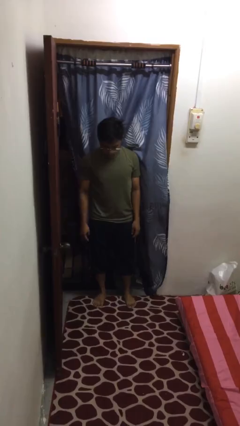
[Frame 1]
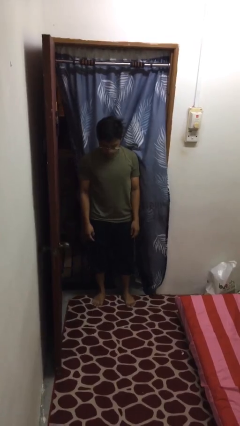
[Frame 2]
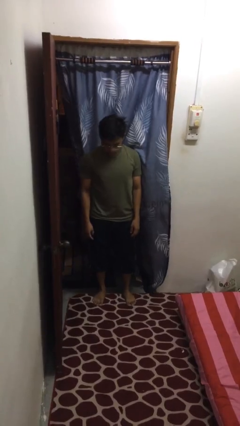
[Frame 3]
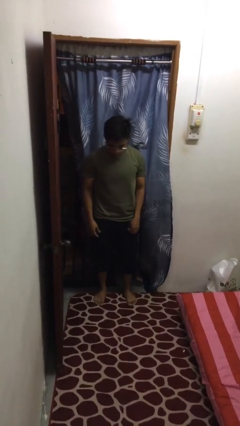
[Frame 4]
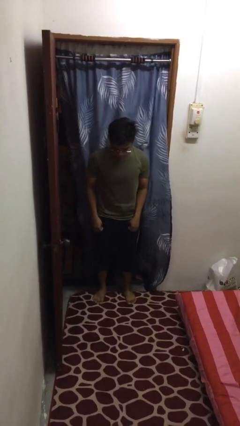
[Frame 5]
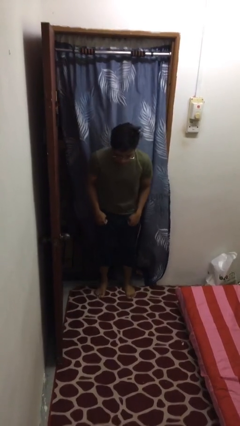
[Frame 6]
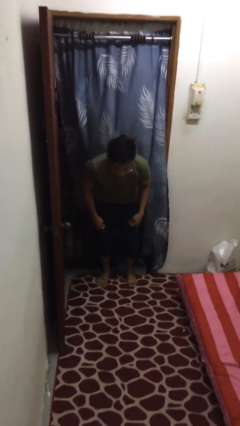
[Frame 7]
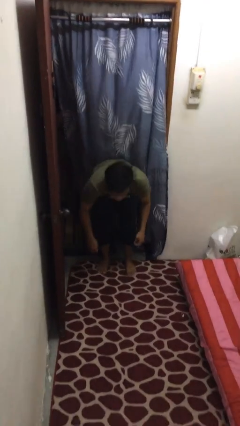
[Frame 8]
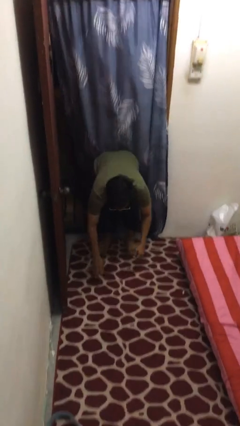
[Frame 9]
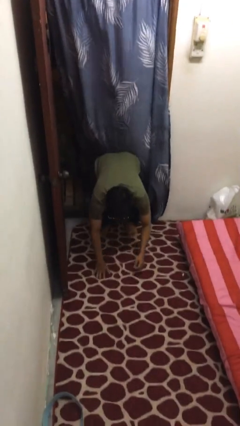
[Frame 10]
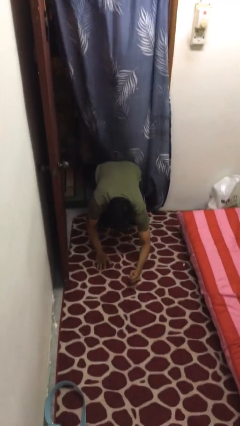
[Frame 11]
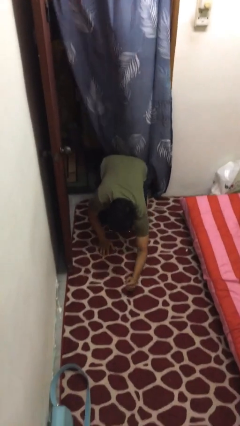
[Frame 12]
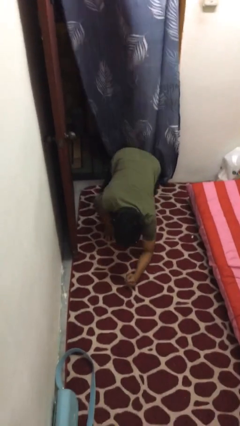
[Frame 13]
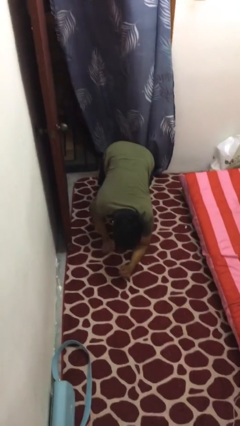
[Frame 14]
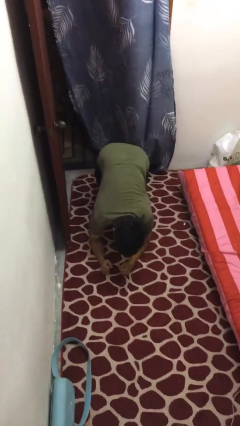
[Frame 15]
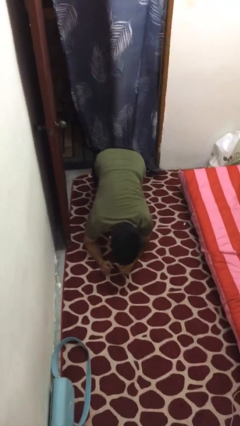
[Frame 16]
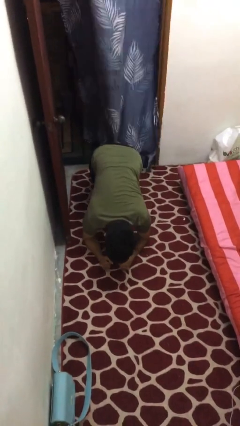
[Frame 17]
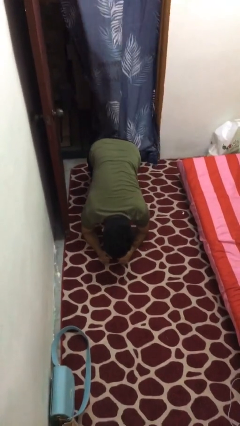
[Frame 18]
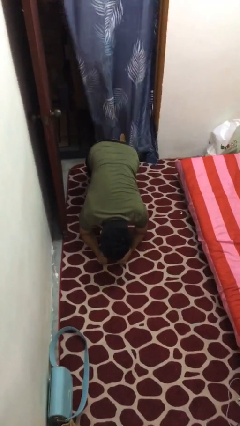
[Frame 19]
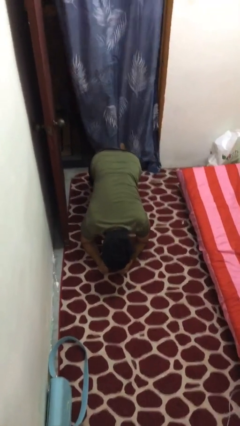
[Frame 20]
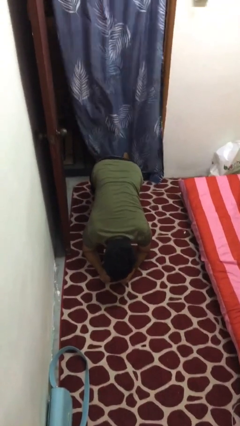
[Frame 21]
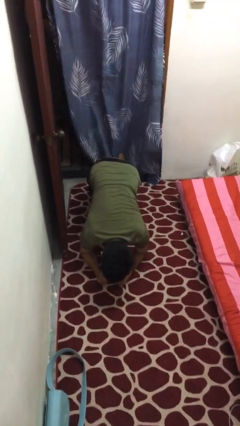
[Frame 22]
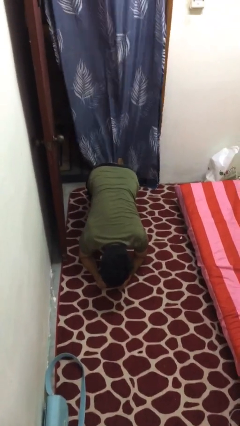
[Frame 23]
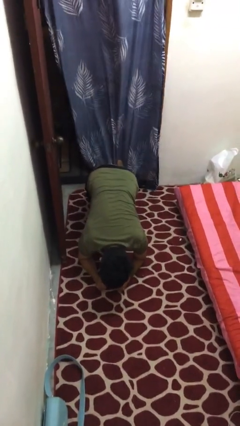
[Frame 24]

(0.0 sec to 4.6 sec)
person exercises with plank

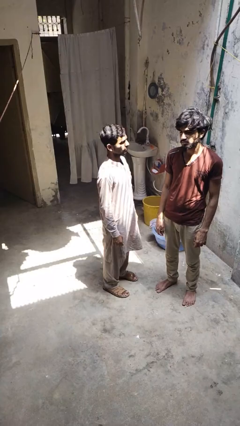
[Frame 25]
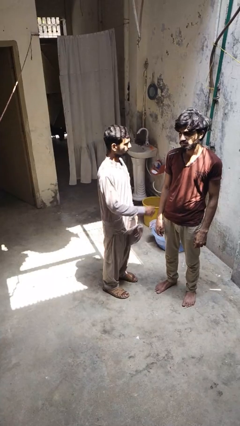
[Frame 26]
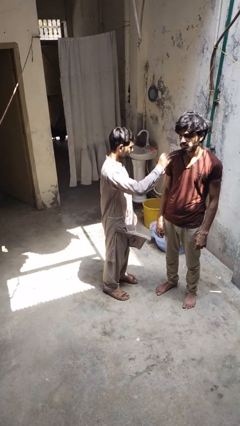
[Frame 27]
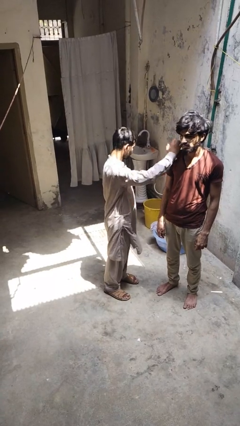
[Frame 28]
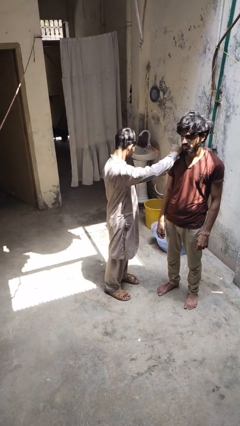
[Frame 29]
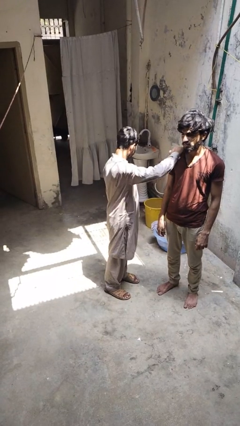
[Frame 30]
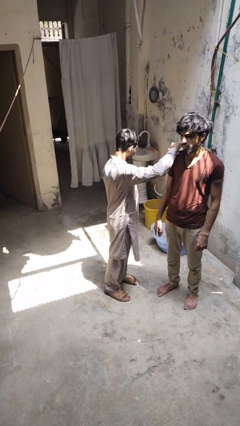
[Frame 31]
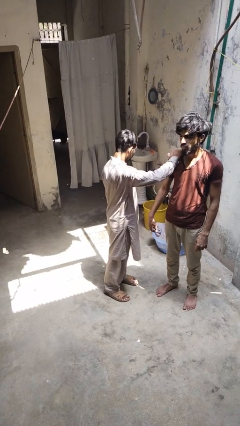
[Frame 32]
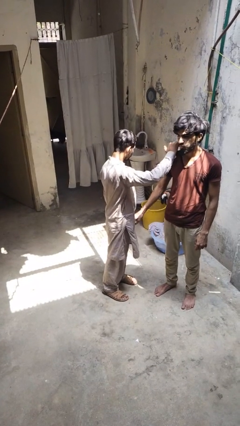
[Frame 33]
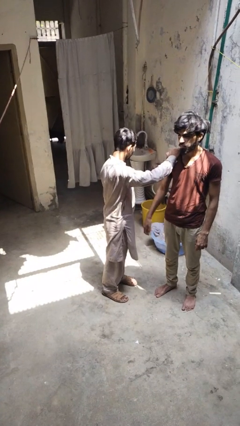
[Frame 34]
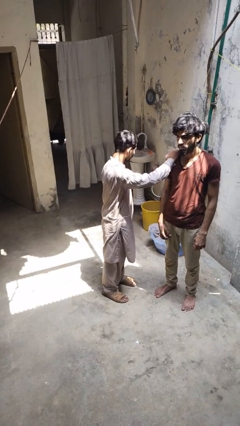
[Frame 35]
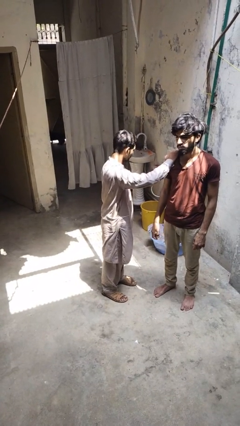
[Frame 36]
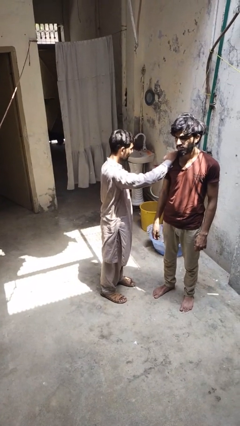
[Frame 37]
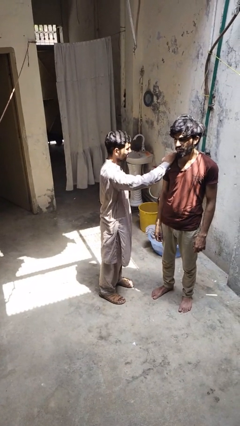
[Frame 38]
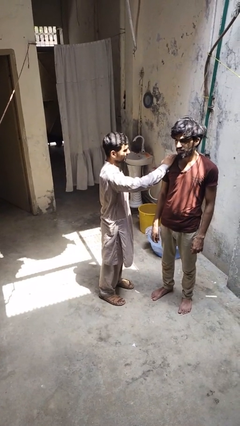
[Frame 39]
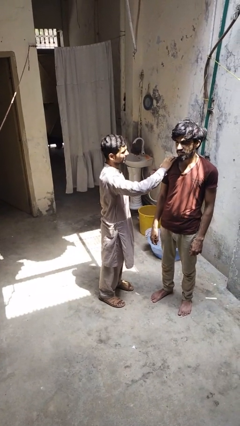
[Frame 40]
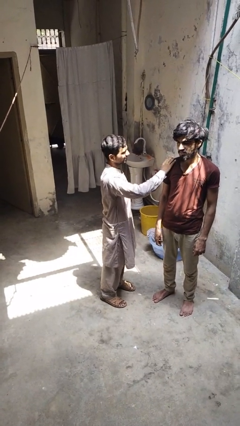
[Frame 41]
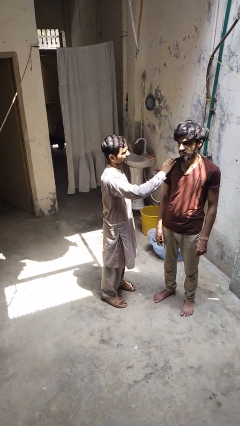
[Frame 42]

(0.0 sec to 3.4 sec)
person pounds shoulders of person

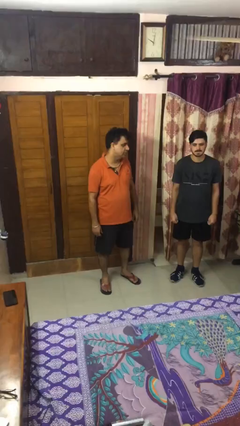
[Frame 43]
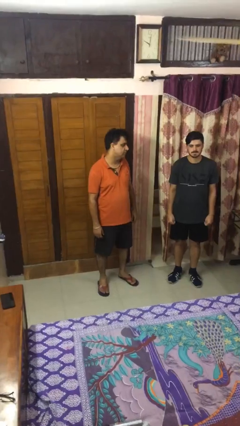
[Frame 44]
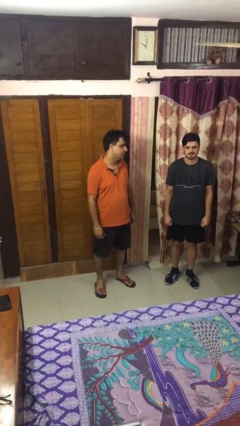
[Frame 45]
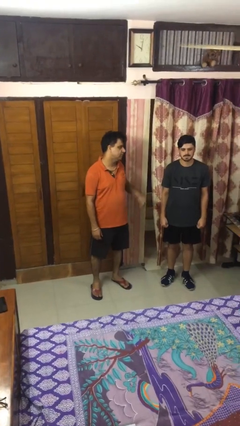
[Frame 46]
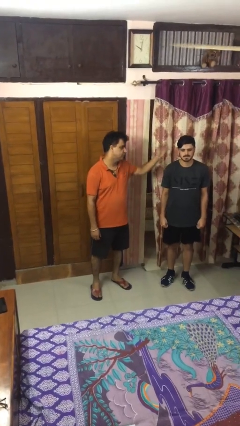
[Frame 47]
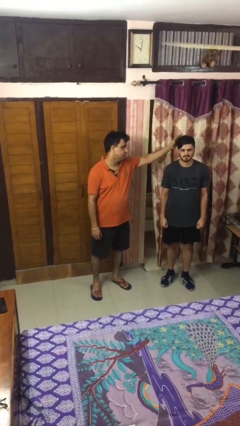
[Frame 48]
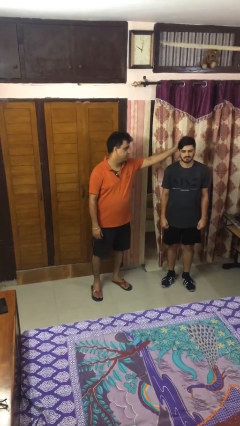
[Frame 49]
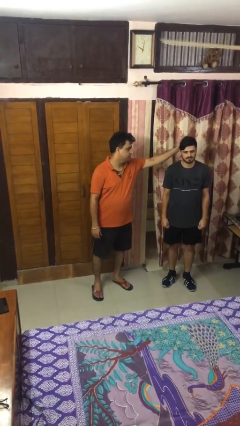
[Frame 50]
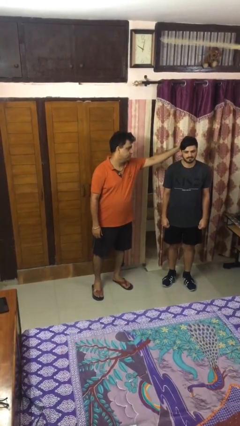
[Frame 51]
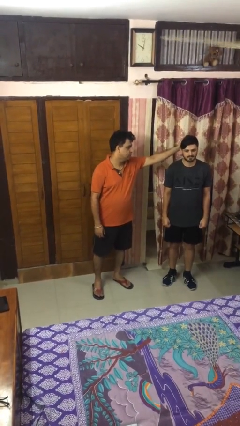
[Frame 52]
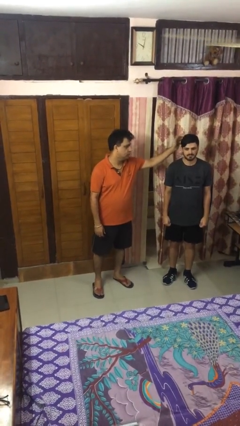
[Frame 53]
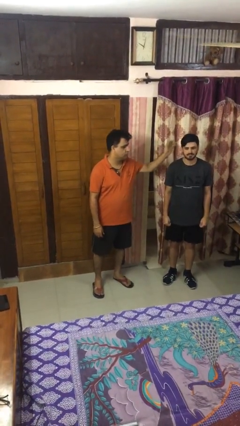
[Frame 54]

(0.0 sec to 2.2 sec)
person grabs person by hair

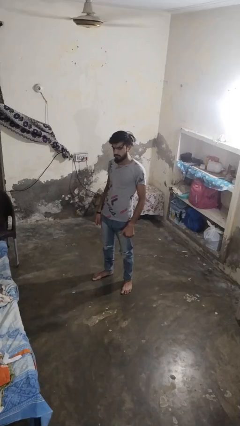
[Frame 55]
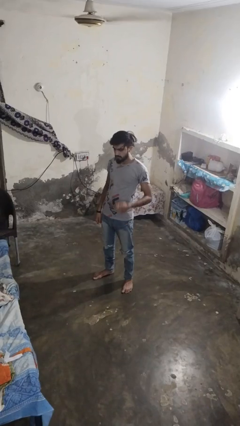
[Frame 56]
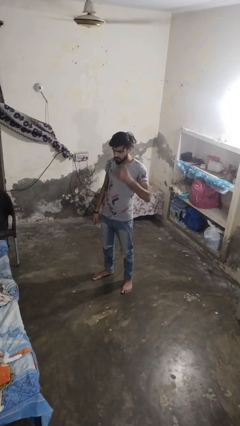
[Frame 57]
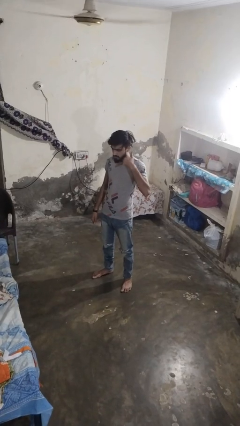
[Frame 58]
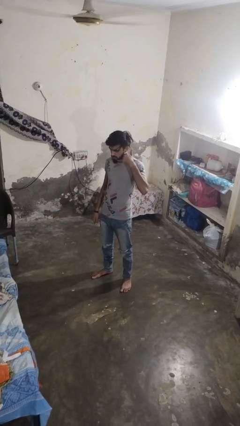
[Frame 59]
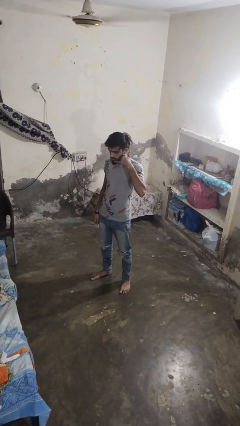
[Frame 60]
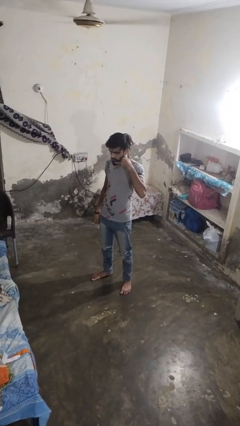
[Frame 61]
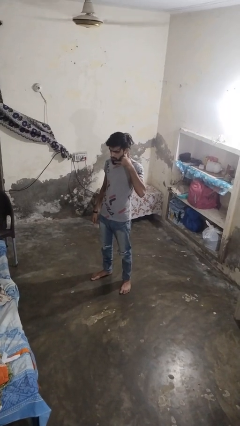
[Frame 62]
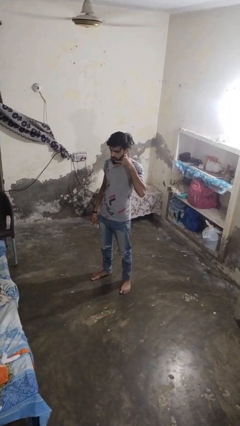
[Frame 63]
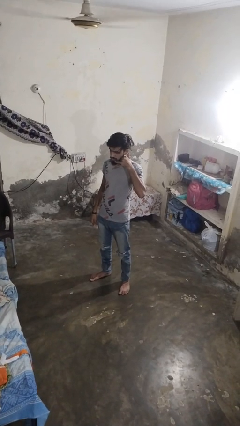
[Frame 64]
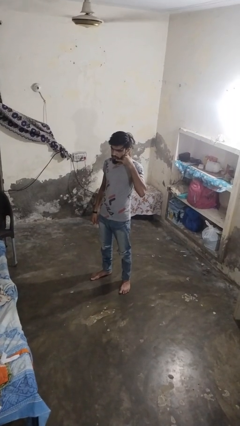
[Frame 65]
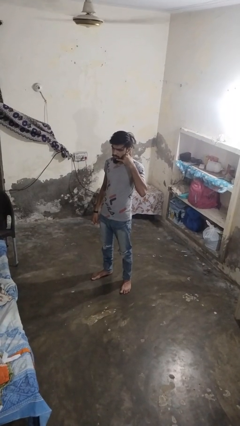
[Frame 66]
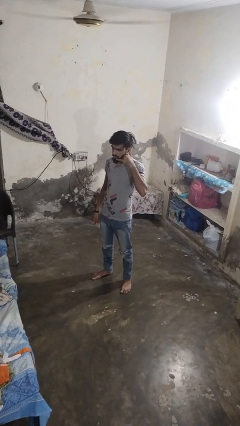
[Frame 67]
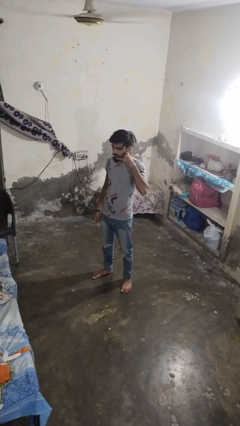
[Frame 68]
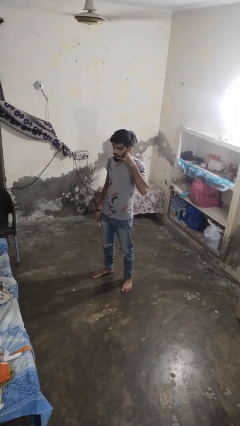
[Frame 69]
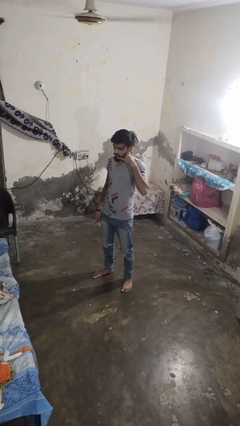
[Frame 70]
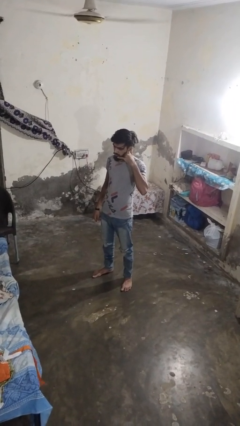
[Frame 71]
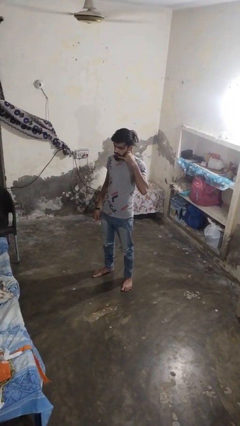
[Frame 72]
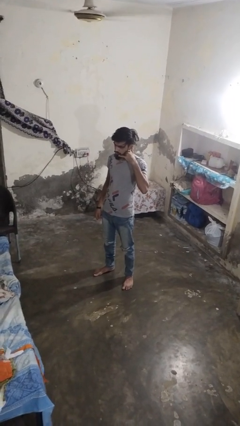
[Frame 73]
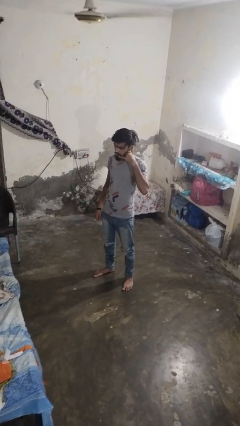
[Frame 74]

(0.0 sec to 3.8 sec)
person gestures call me

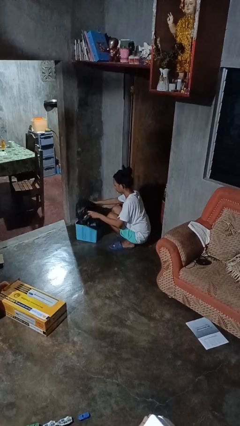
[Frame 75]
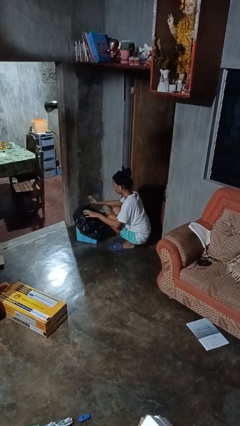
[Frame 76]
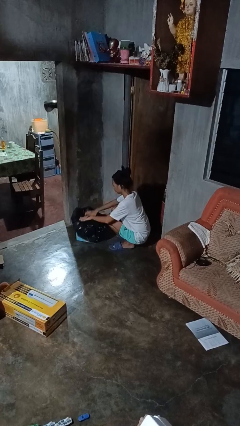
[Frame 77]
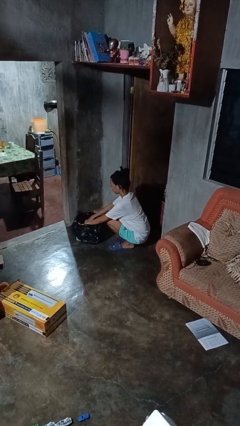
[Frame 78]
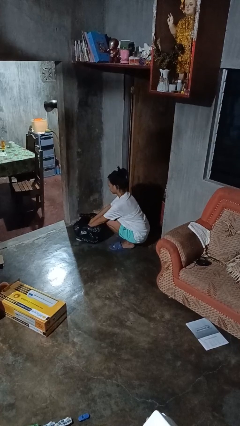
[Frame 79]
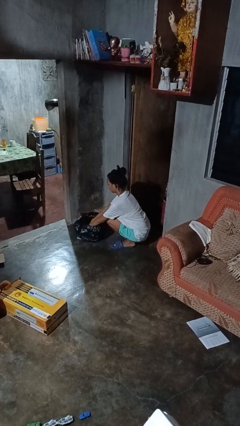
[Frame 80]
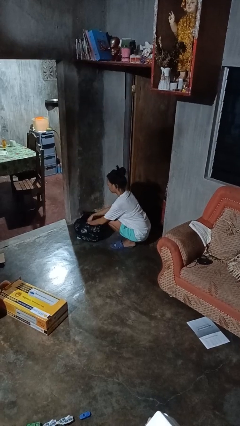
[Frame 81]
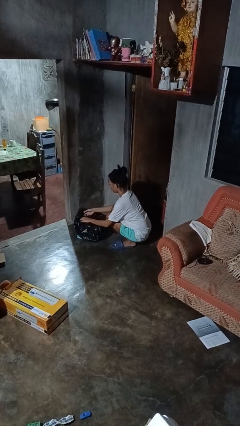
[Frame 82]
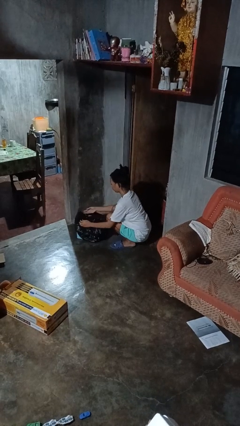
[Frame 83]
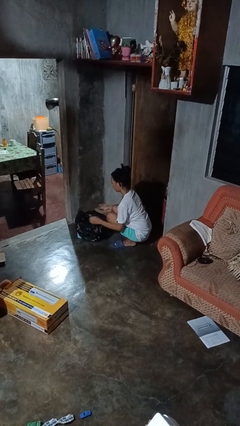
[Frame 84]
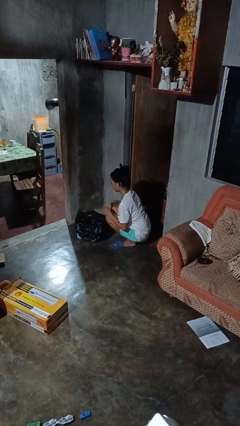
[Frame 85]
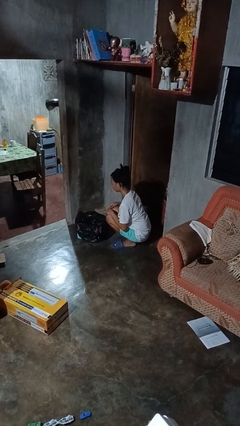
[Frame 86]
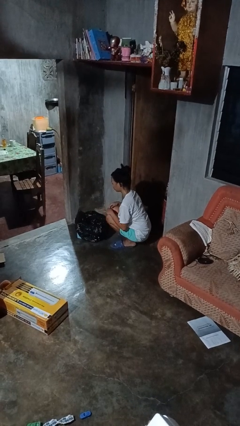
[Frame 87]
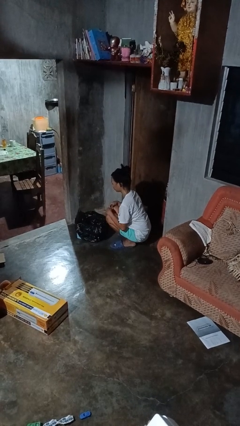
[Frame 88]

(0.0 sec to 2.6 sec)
person inserts trashbag into trashcan

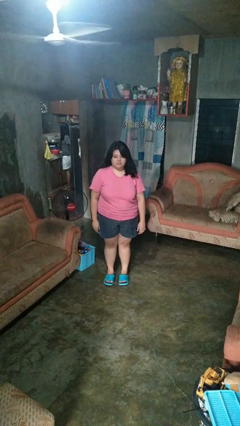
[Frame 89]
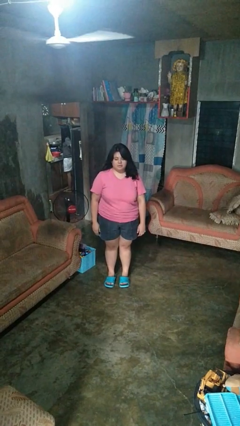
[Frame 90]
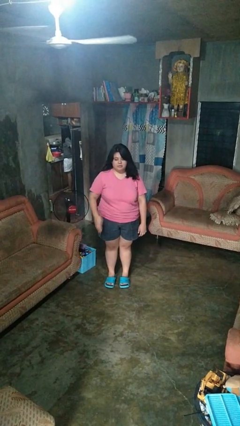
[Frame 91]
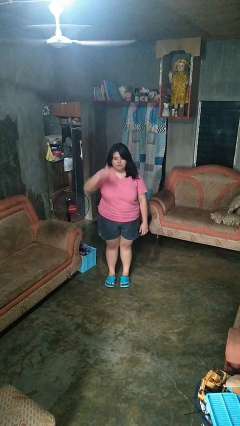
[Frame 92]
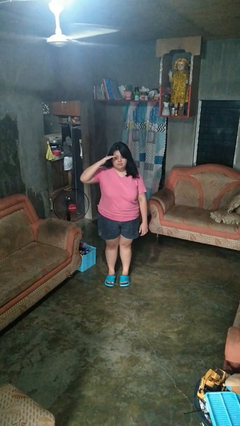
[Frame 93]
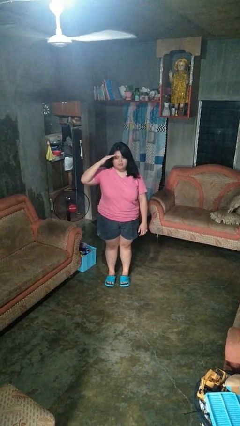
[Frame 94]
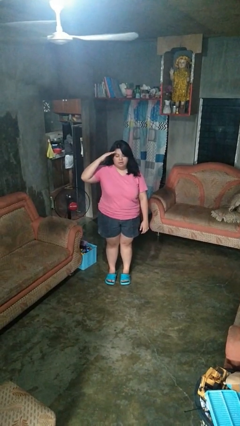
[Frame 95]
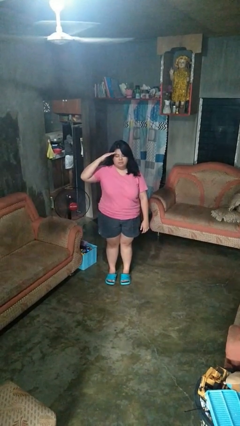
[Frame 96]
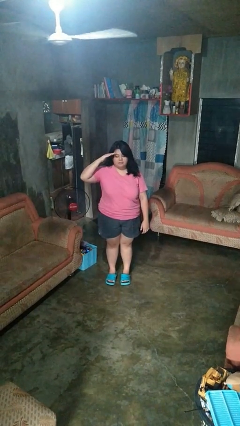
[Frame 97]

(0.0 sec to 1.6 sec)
person salutes
